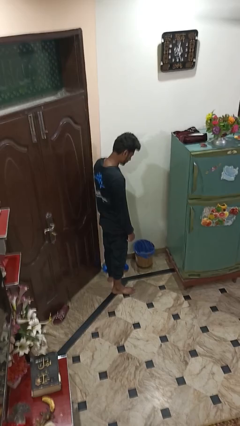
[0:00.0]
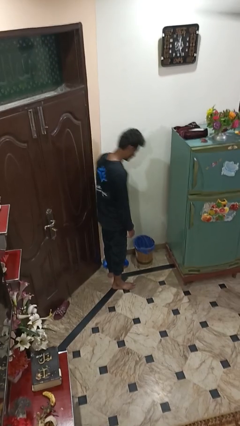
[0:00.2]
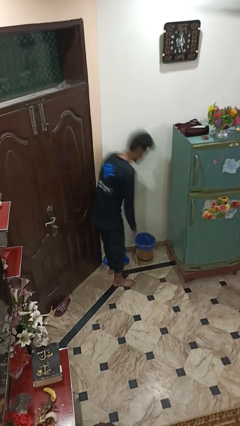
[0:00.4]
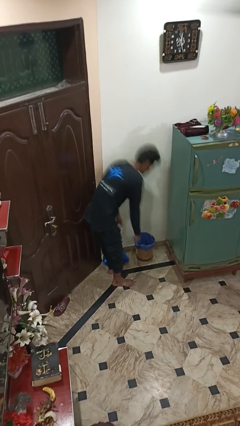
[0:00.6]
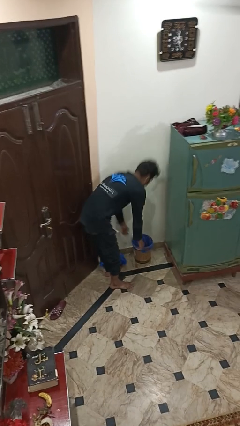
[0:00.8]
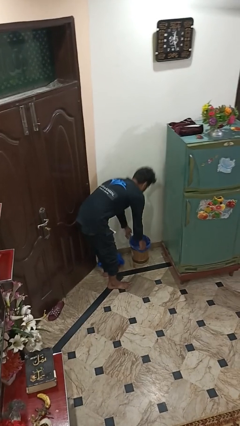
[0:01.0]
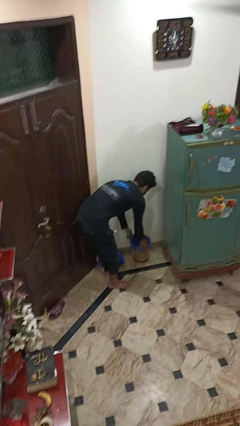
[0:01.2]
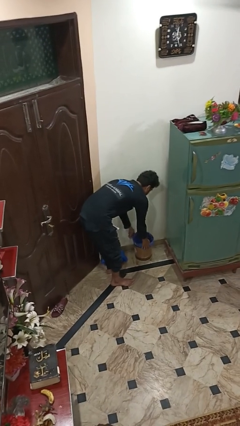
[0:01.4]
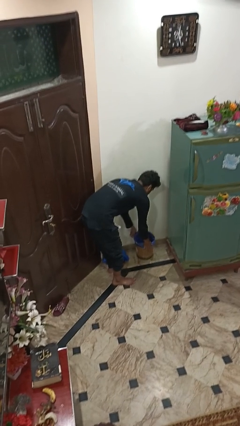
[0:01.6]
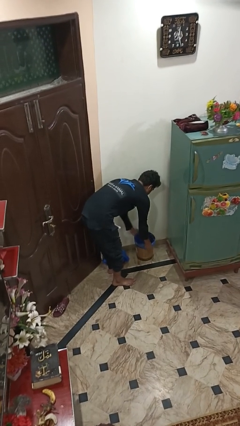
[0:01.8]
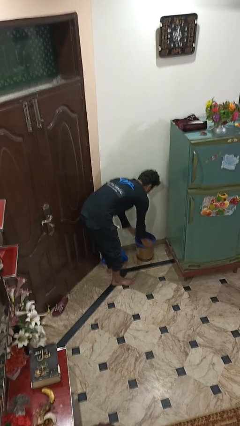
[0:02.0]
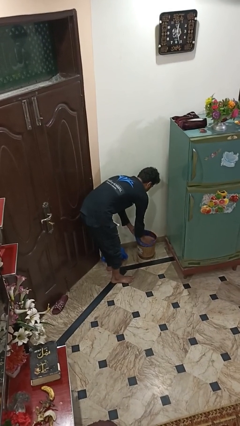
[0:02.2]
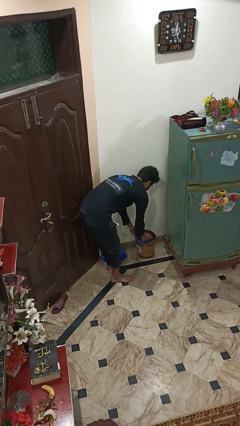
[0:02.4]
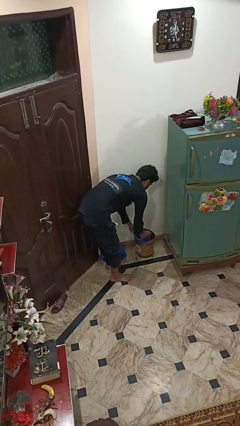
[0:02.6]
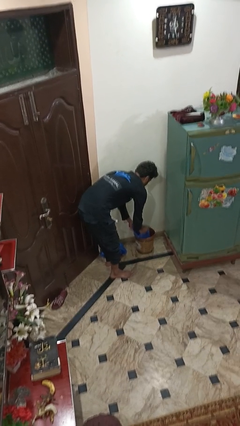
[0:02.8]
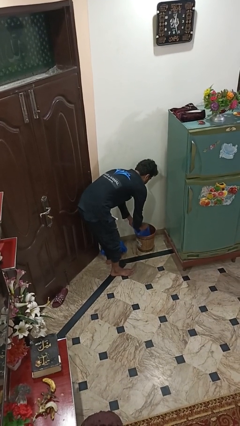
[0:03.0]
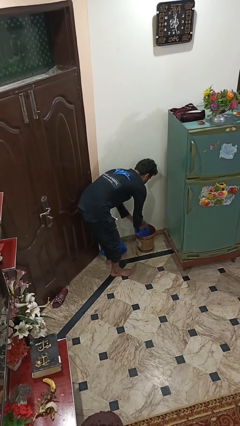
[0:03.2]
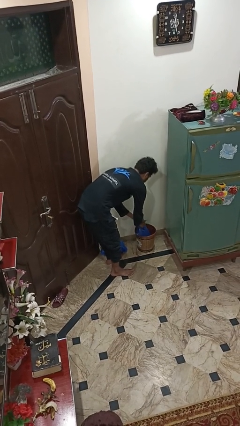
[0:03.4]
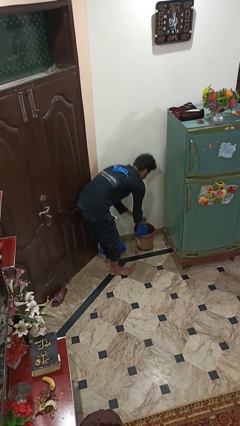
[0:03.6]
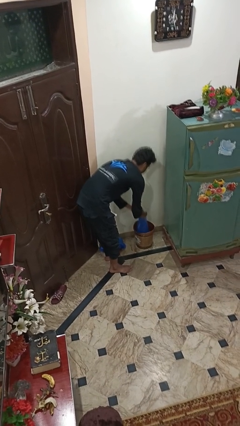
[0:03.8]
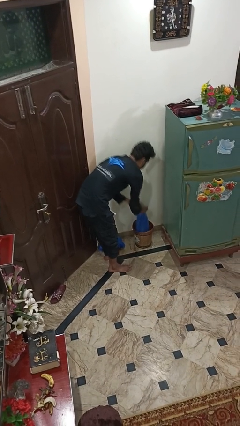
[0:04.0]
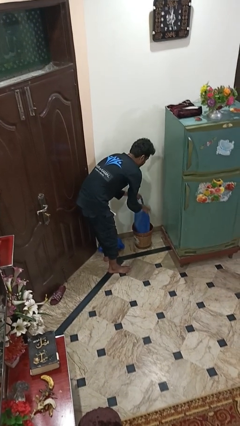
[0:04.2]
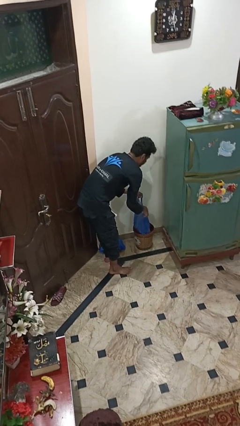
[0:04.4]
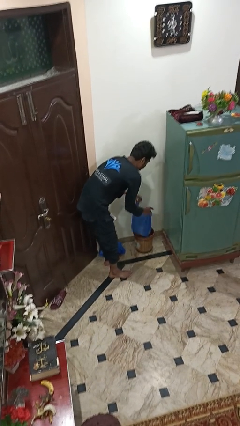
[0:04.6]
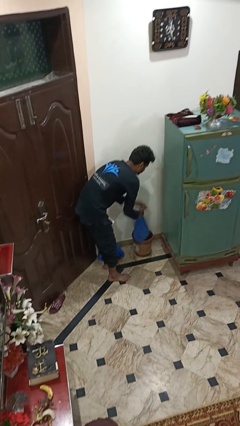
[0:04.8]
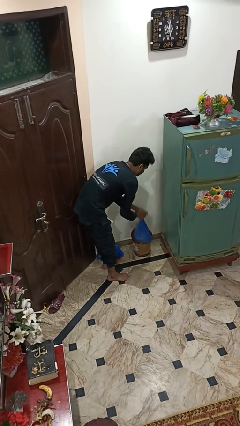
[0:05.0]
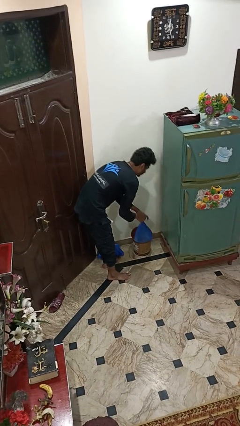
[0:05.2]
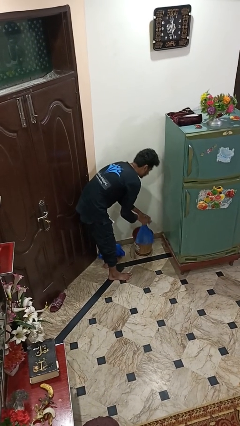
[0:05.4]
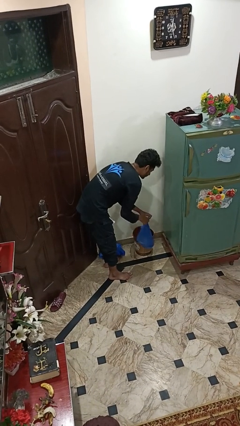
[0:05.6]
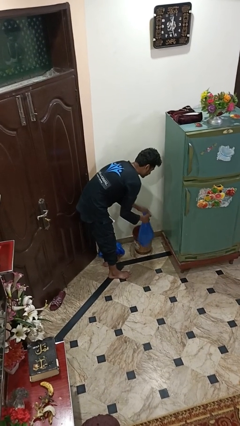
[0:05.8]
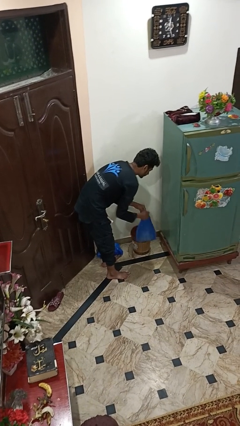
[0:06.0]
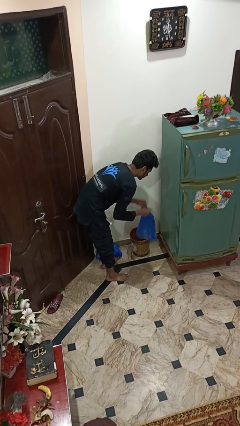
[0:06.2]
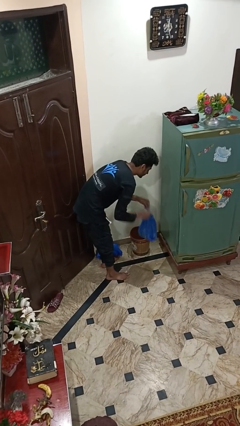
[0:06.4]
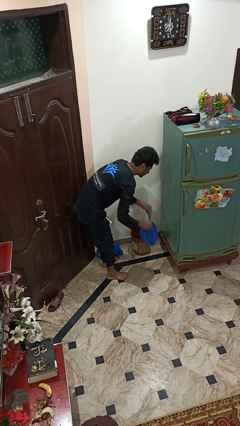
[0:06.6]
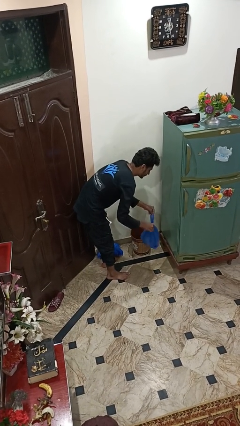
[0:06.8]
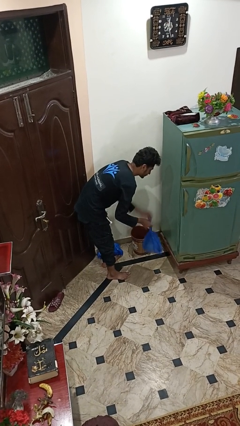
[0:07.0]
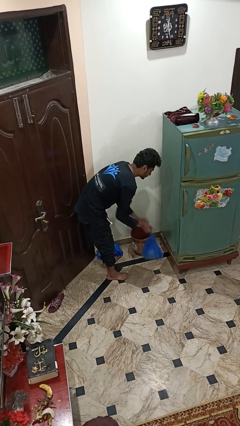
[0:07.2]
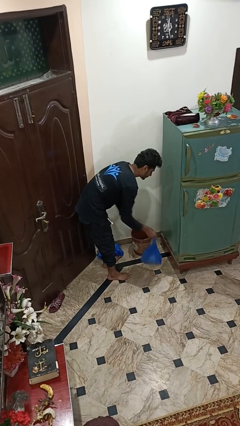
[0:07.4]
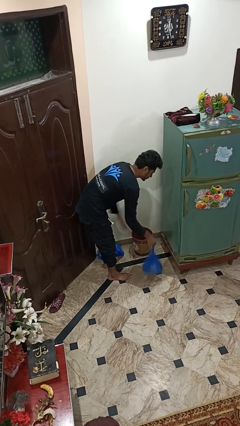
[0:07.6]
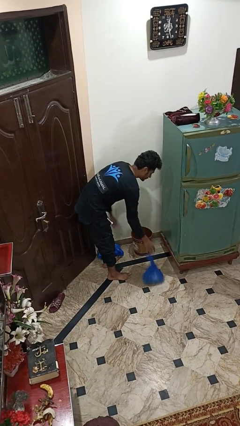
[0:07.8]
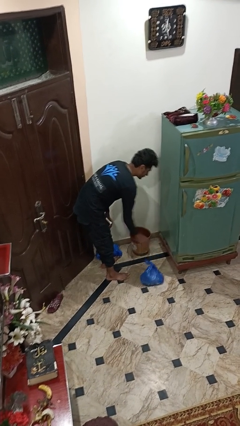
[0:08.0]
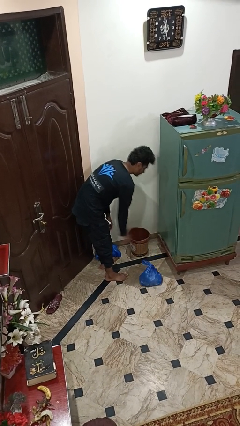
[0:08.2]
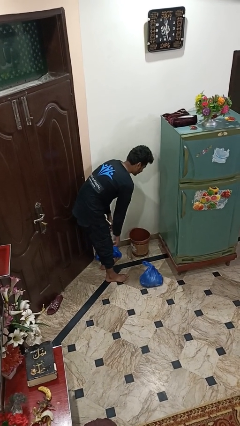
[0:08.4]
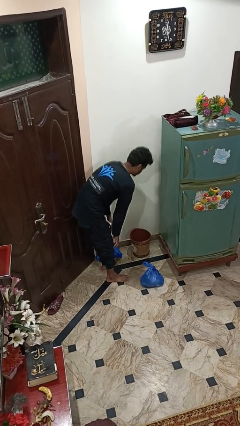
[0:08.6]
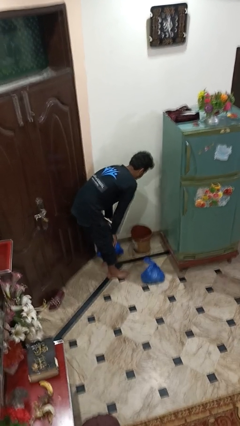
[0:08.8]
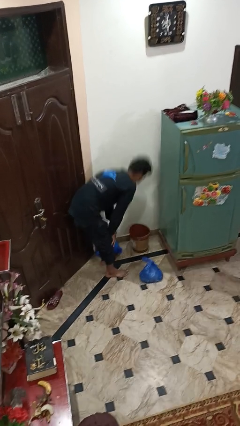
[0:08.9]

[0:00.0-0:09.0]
person removes trashbag from trashcan

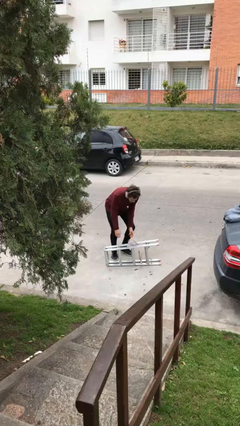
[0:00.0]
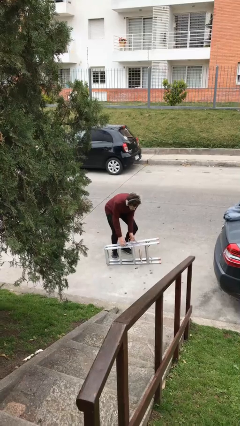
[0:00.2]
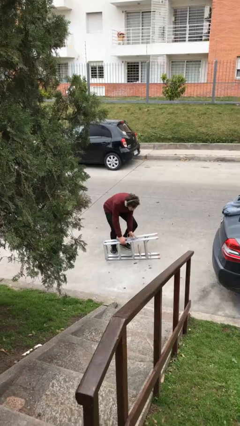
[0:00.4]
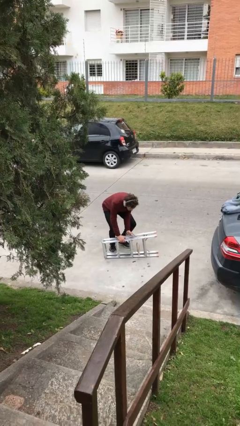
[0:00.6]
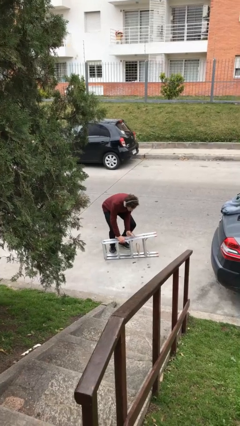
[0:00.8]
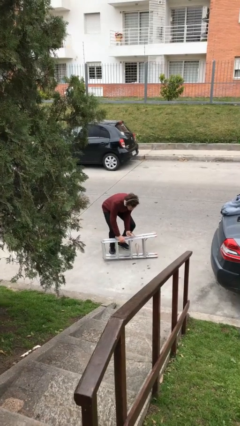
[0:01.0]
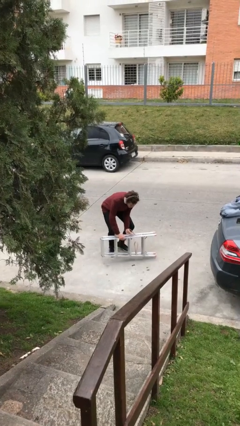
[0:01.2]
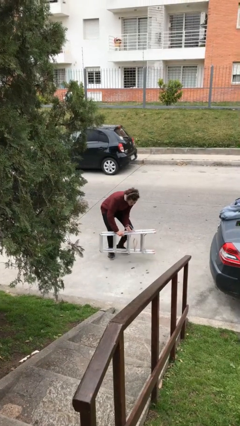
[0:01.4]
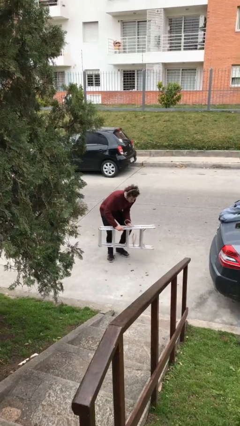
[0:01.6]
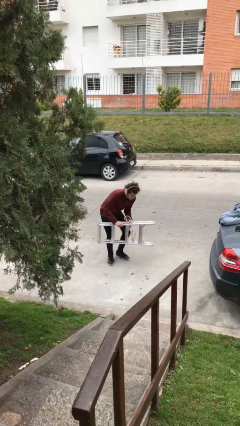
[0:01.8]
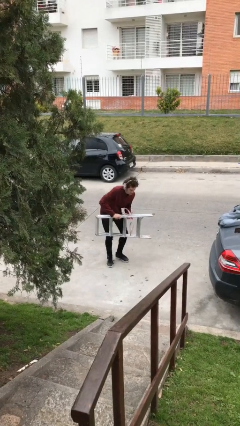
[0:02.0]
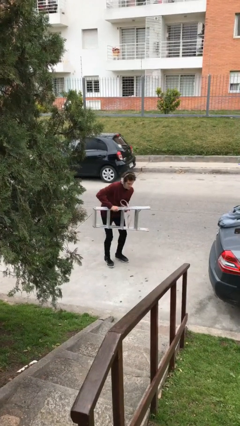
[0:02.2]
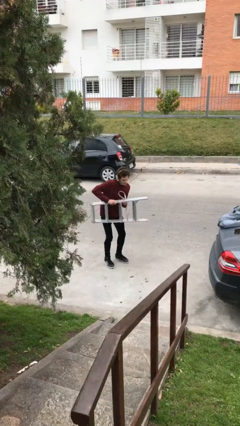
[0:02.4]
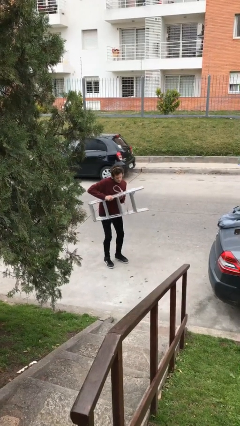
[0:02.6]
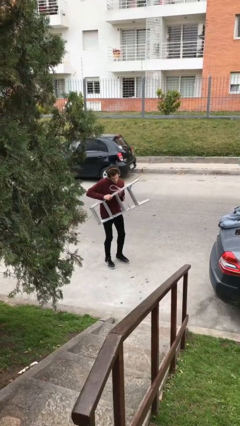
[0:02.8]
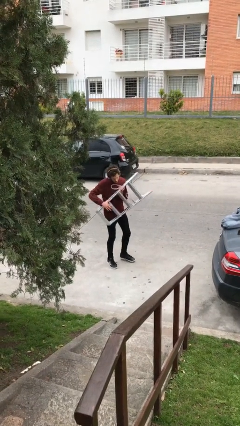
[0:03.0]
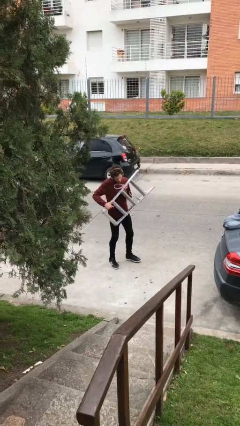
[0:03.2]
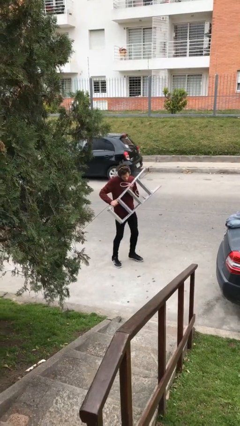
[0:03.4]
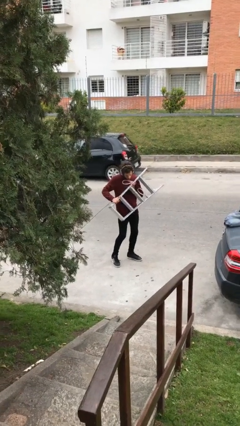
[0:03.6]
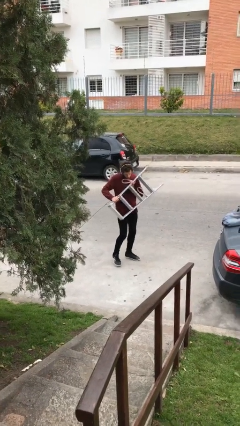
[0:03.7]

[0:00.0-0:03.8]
person picks up object from floor

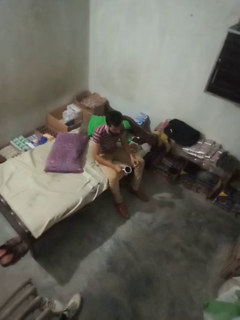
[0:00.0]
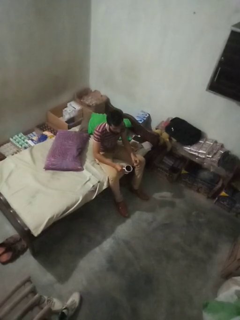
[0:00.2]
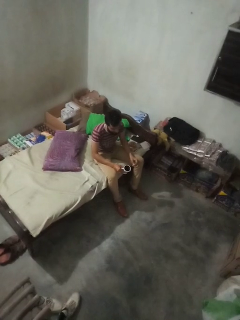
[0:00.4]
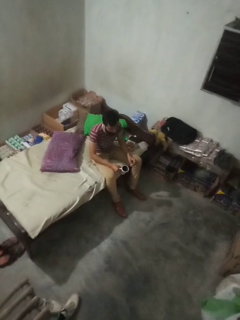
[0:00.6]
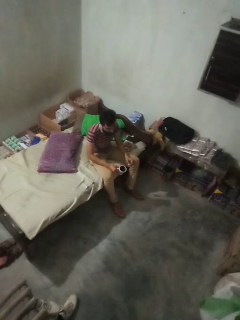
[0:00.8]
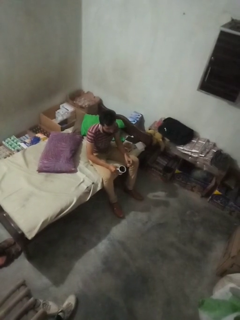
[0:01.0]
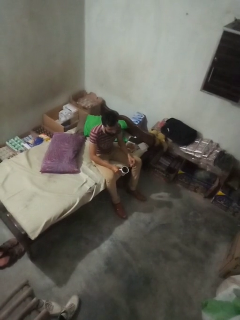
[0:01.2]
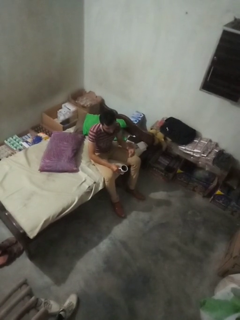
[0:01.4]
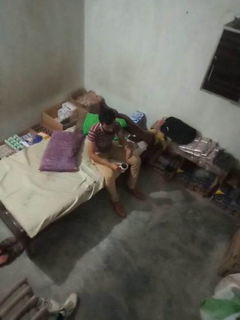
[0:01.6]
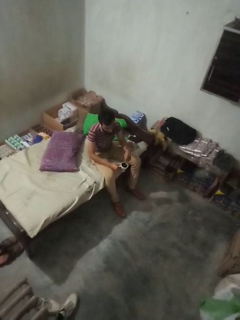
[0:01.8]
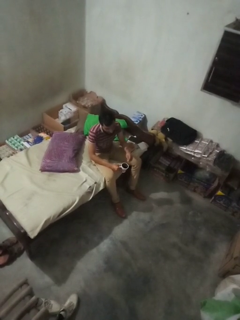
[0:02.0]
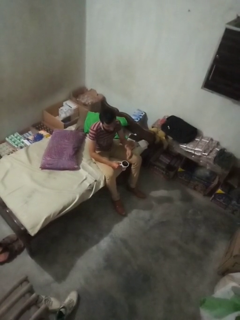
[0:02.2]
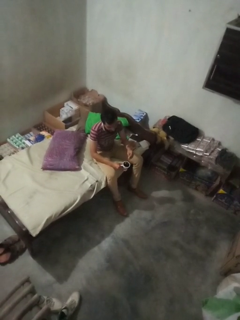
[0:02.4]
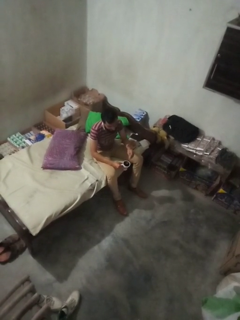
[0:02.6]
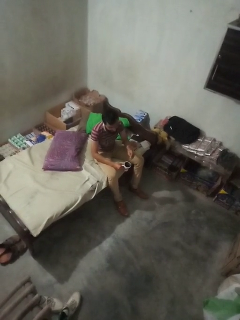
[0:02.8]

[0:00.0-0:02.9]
person stirs mug

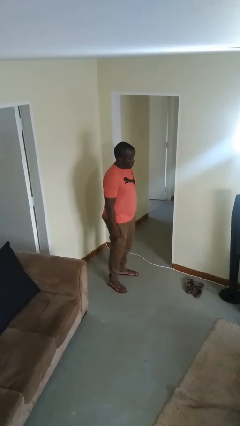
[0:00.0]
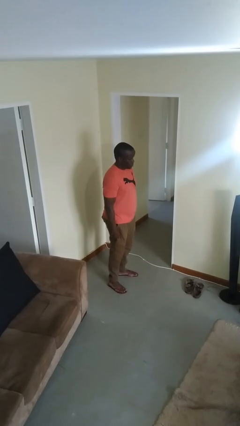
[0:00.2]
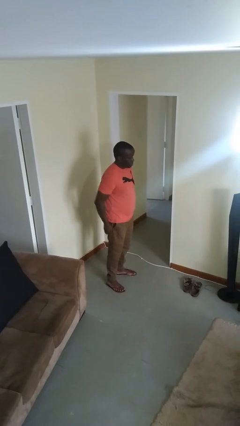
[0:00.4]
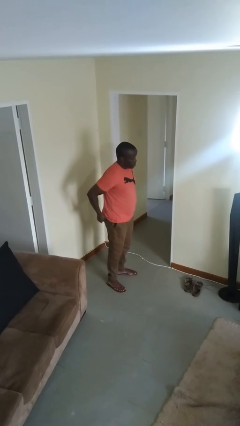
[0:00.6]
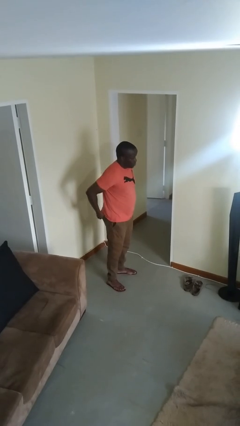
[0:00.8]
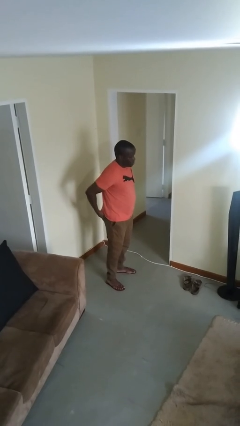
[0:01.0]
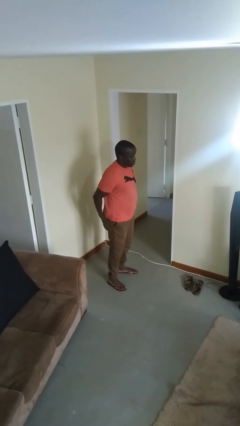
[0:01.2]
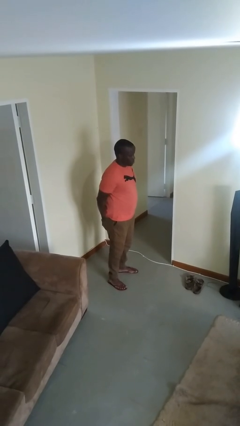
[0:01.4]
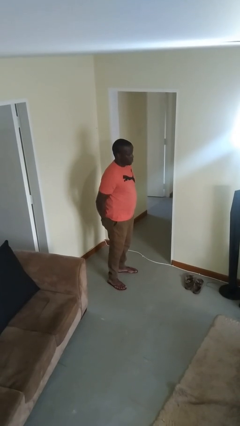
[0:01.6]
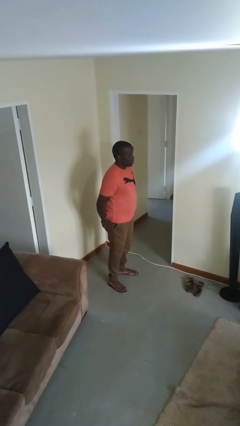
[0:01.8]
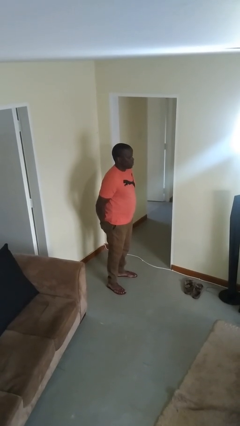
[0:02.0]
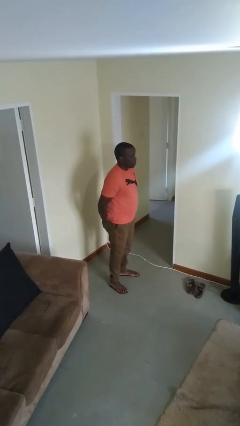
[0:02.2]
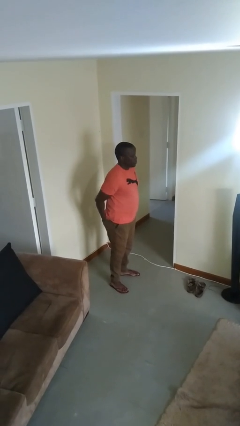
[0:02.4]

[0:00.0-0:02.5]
person puts hands in back pockets

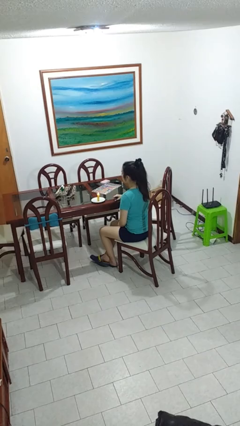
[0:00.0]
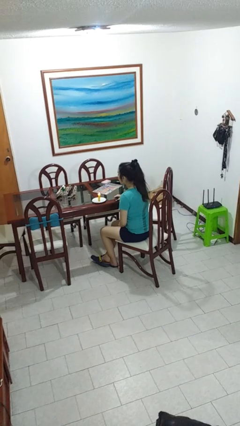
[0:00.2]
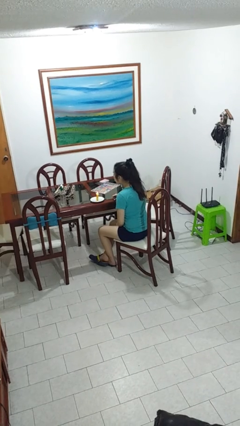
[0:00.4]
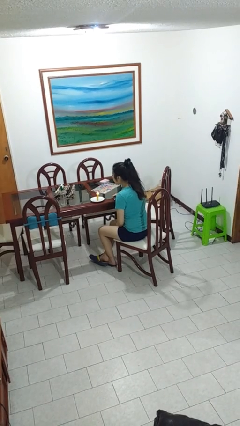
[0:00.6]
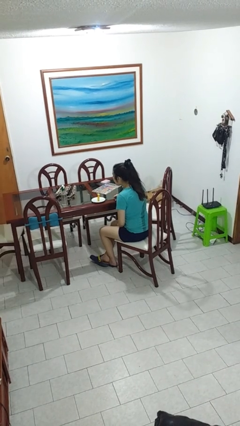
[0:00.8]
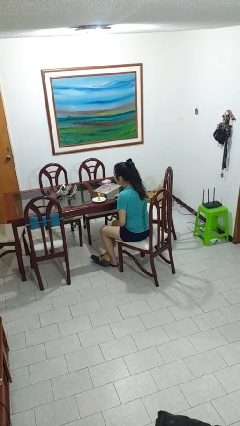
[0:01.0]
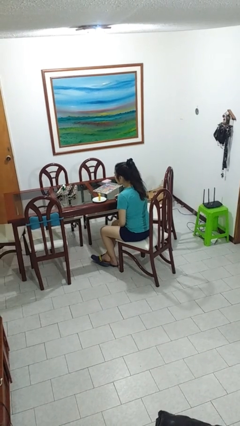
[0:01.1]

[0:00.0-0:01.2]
person extinguishes candle
